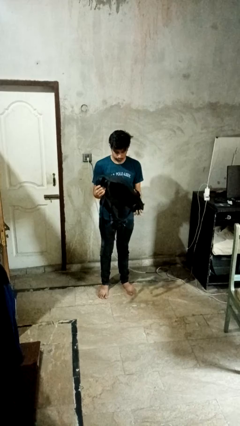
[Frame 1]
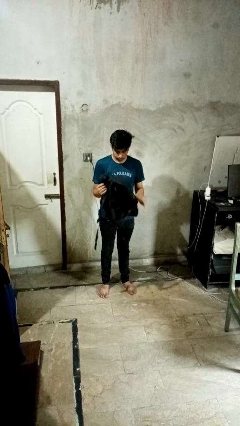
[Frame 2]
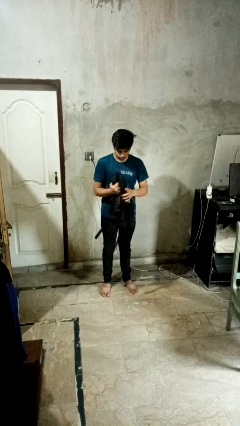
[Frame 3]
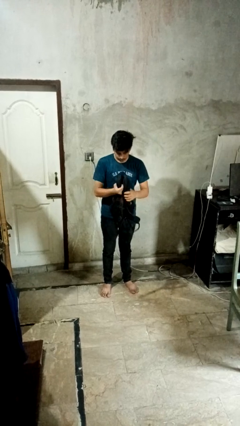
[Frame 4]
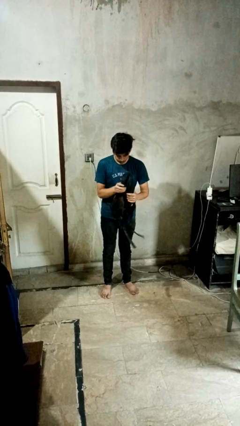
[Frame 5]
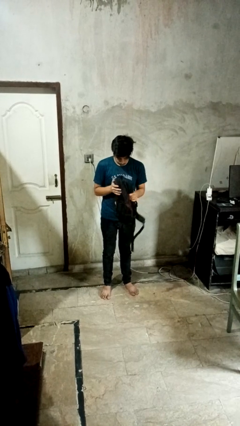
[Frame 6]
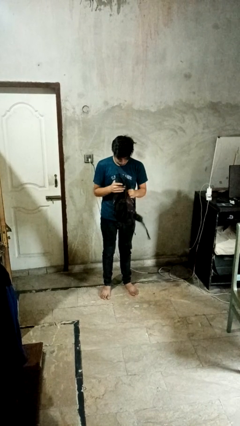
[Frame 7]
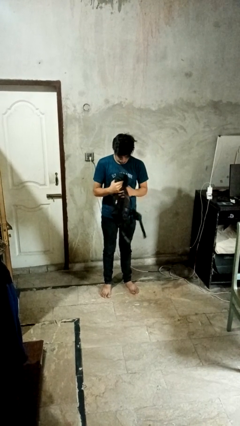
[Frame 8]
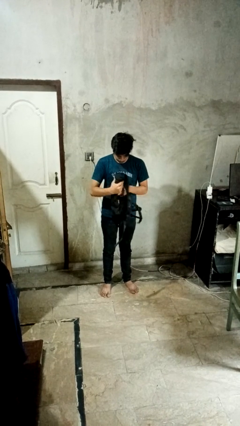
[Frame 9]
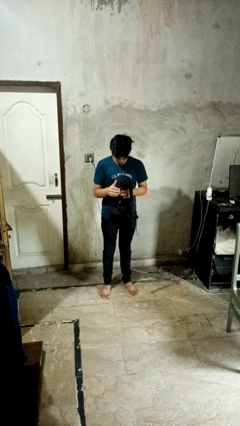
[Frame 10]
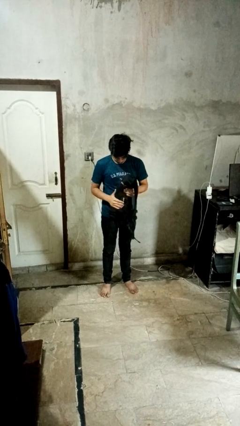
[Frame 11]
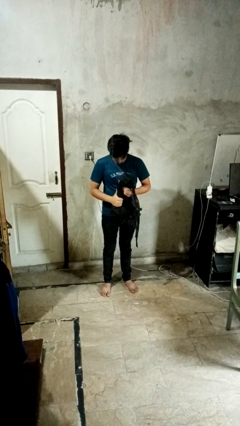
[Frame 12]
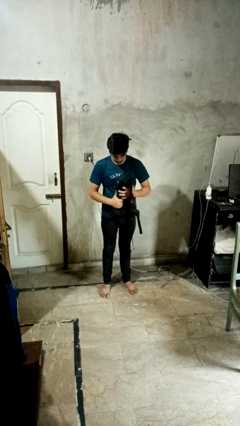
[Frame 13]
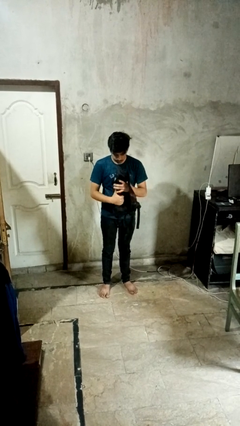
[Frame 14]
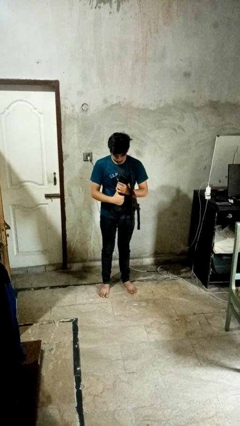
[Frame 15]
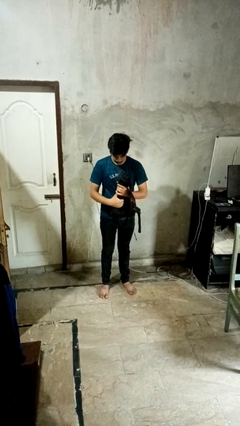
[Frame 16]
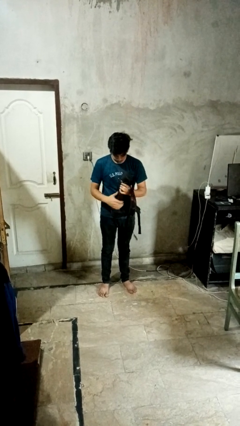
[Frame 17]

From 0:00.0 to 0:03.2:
person squeezes object

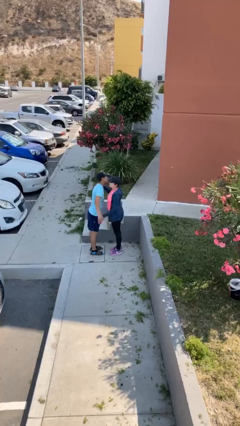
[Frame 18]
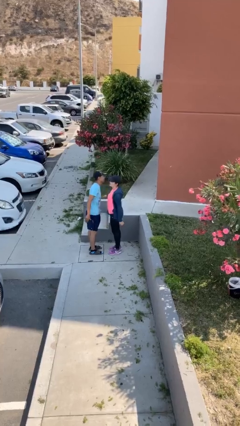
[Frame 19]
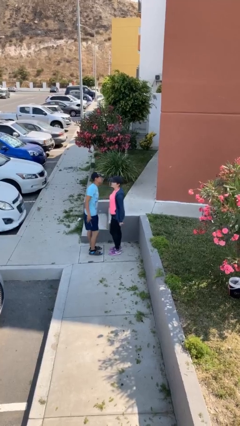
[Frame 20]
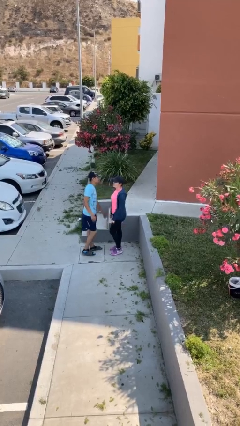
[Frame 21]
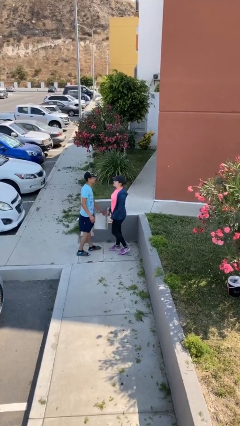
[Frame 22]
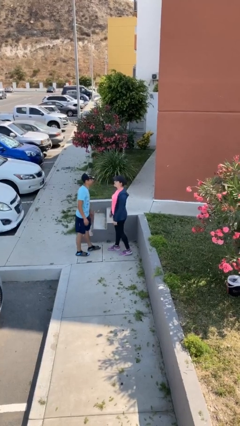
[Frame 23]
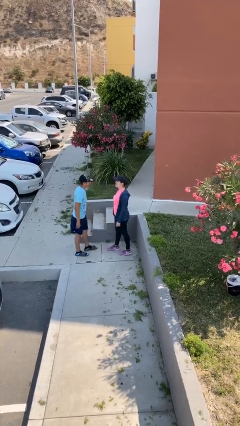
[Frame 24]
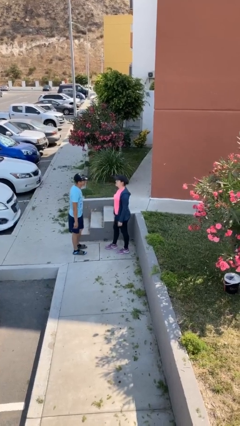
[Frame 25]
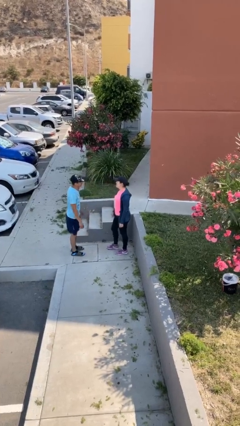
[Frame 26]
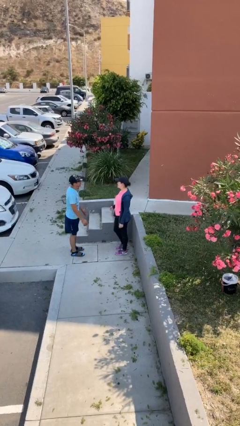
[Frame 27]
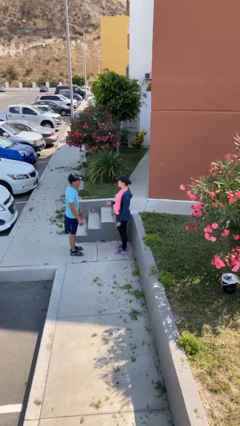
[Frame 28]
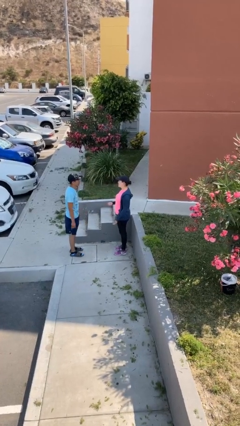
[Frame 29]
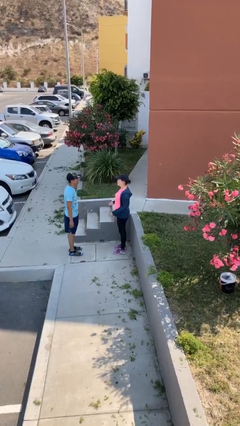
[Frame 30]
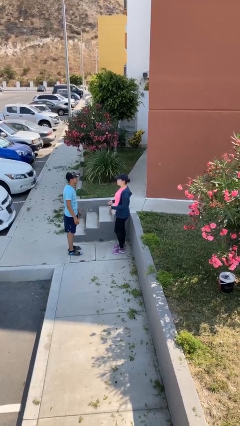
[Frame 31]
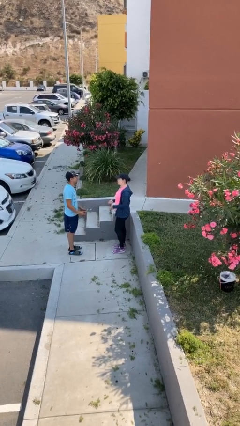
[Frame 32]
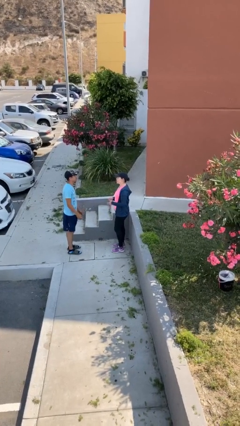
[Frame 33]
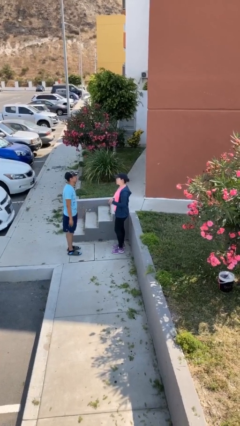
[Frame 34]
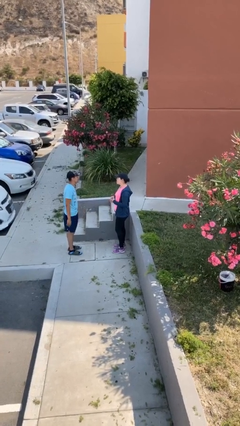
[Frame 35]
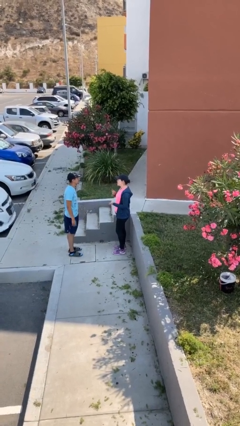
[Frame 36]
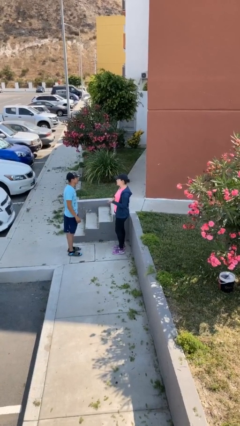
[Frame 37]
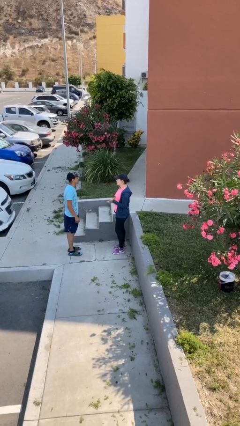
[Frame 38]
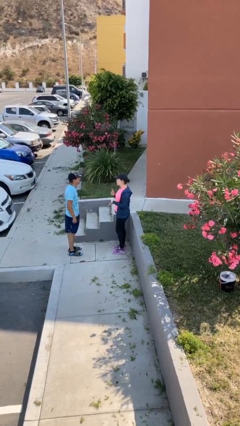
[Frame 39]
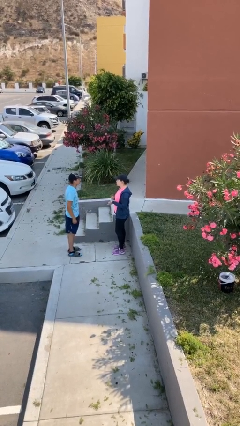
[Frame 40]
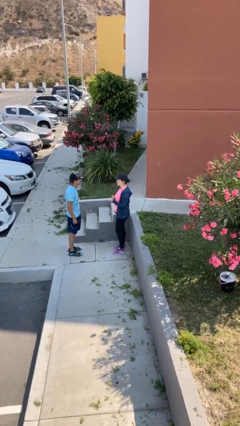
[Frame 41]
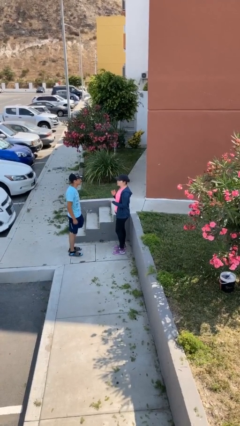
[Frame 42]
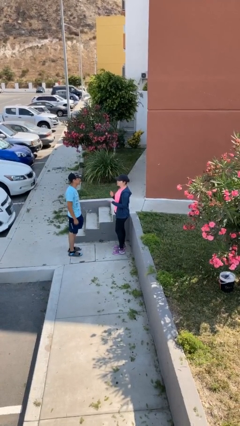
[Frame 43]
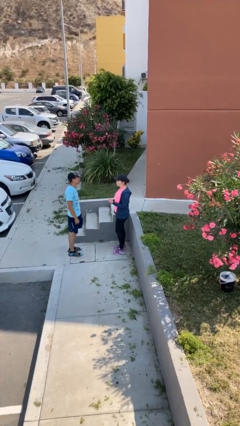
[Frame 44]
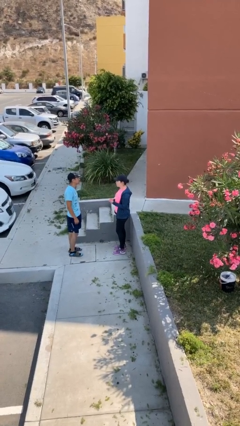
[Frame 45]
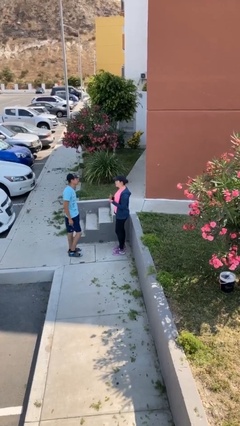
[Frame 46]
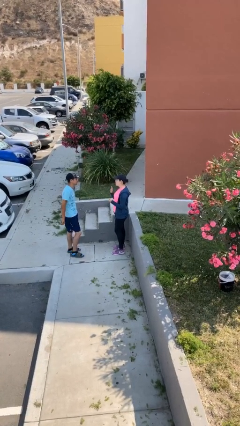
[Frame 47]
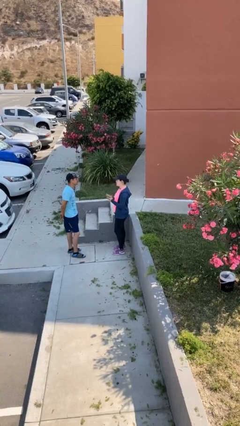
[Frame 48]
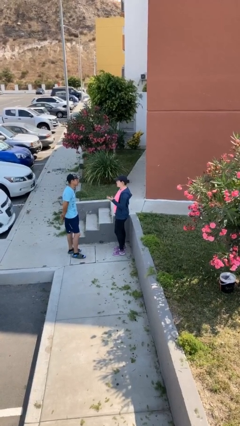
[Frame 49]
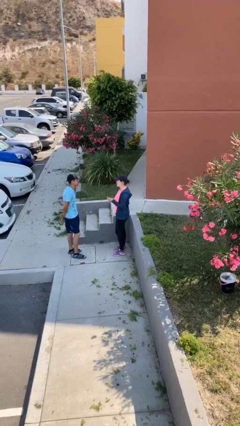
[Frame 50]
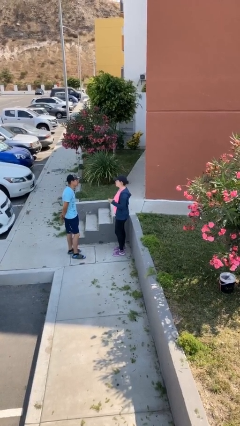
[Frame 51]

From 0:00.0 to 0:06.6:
person talks to person

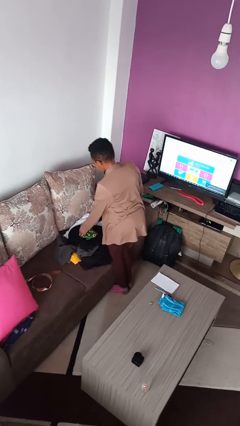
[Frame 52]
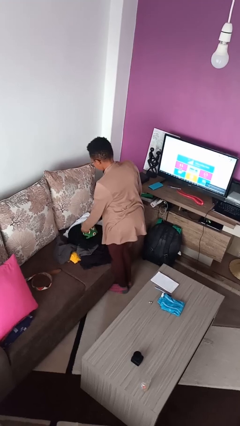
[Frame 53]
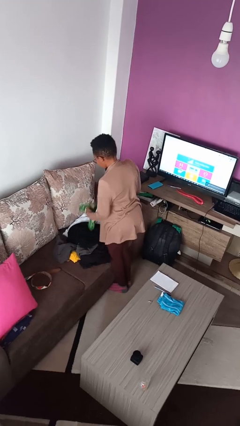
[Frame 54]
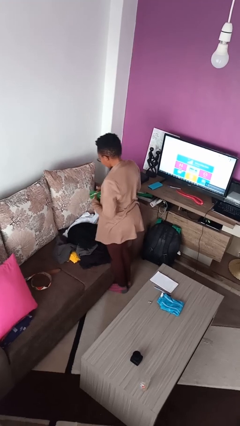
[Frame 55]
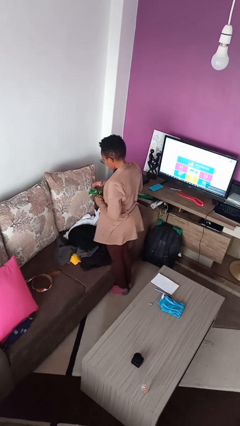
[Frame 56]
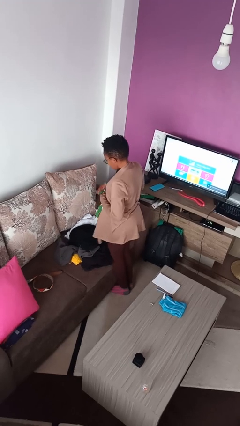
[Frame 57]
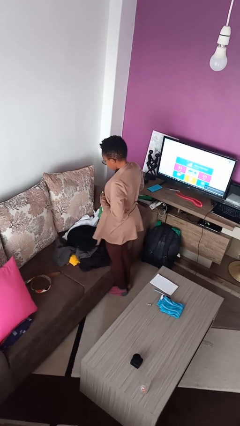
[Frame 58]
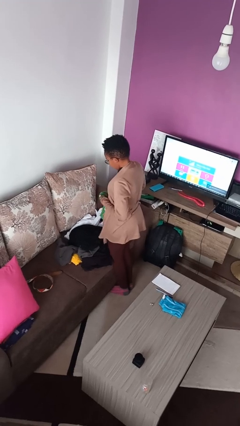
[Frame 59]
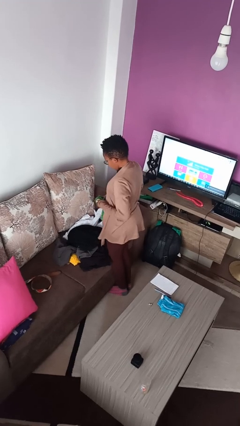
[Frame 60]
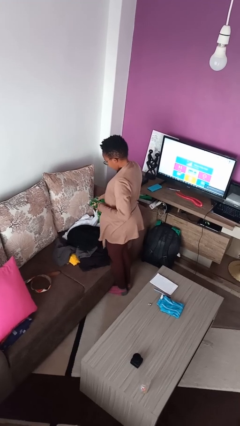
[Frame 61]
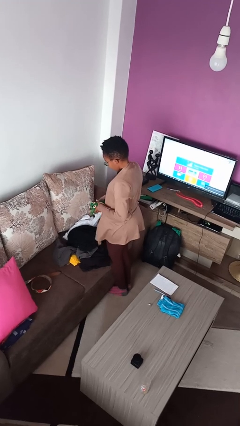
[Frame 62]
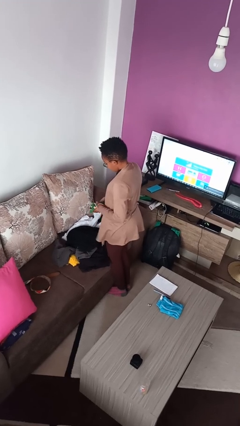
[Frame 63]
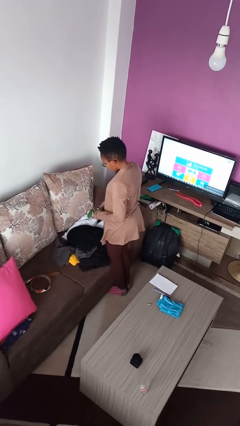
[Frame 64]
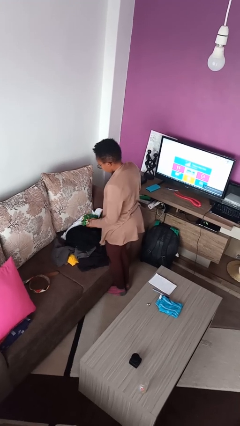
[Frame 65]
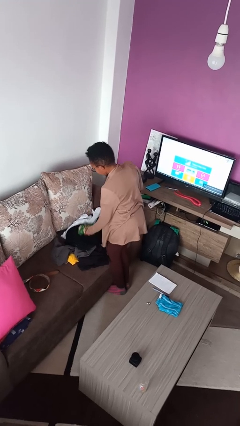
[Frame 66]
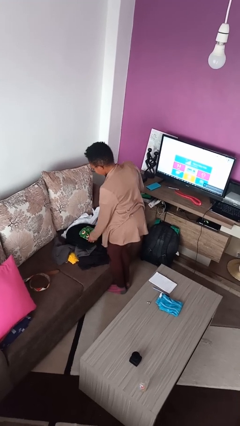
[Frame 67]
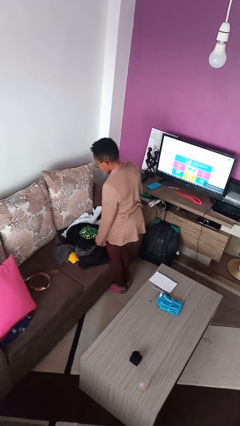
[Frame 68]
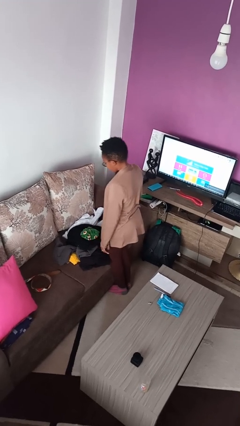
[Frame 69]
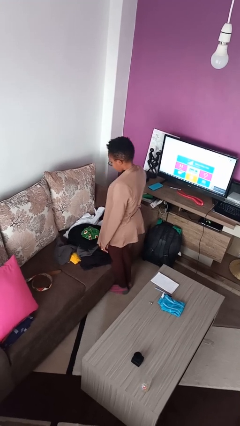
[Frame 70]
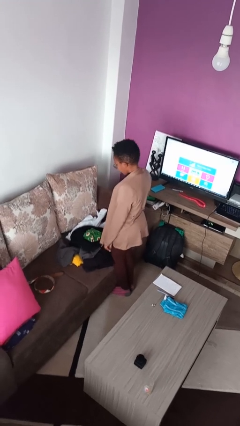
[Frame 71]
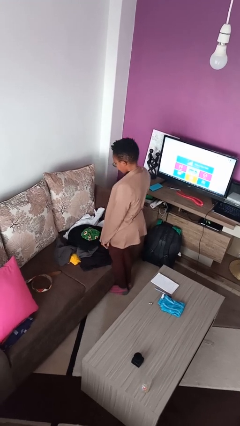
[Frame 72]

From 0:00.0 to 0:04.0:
person folds socks

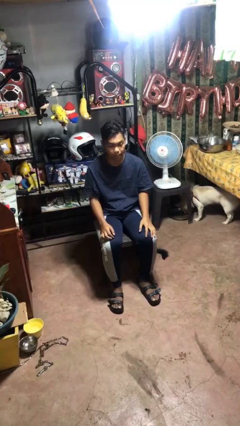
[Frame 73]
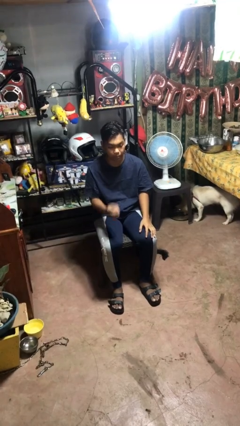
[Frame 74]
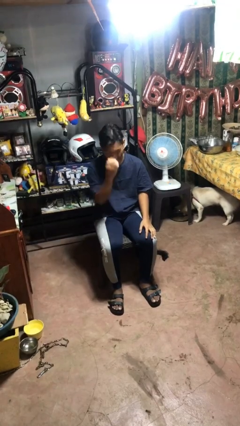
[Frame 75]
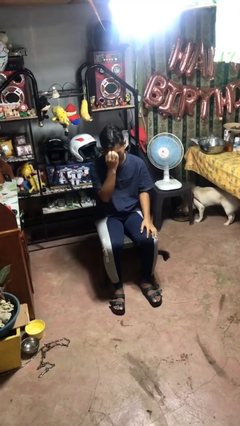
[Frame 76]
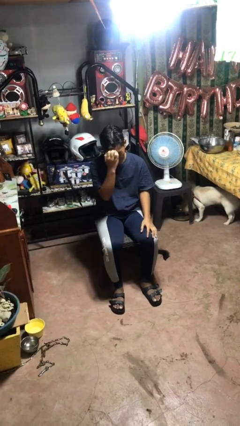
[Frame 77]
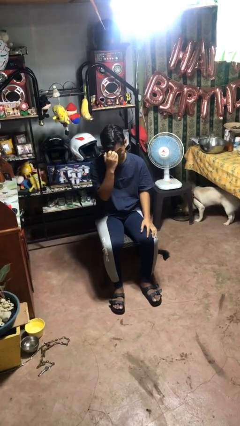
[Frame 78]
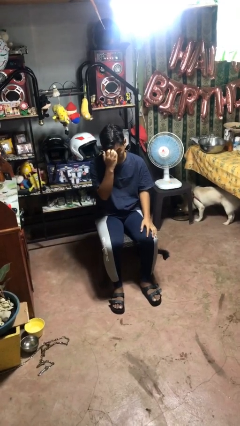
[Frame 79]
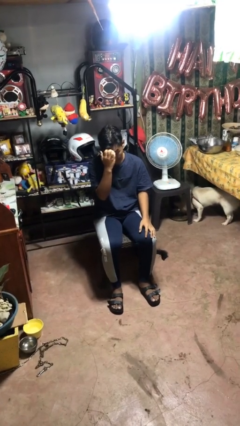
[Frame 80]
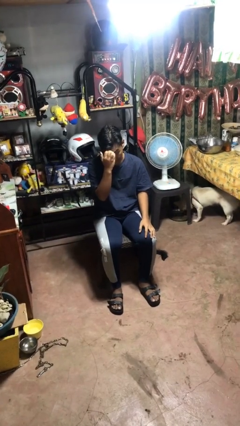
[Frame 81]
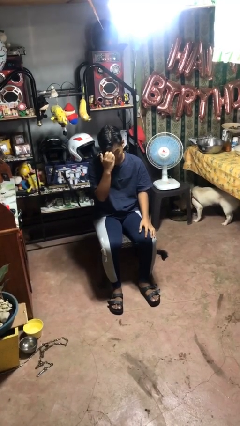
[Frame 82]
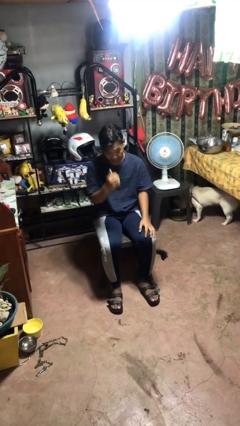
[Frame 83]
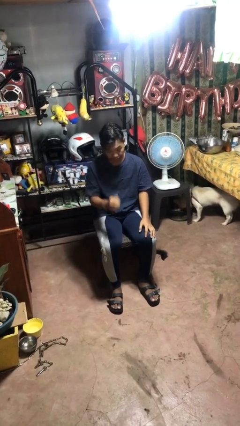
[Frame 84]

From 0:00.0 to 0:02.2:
person scratches face

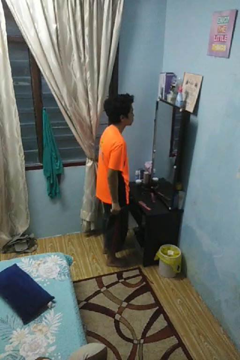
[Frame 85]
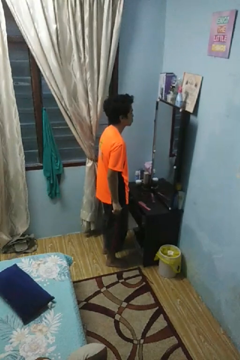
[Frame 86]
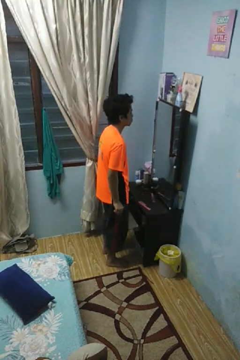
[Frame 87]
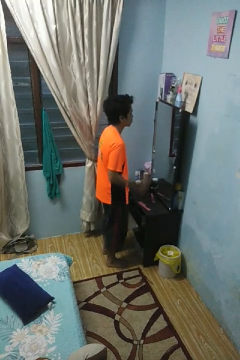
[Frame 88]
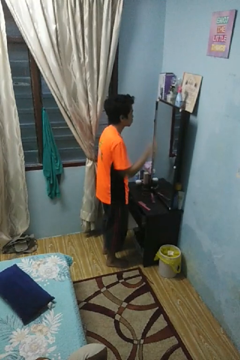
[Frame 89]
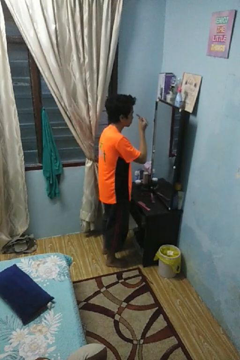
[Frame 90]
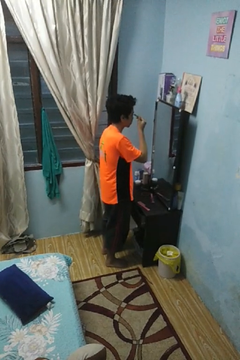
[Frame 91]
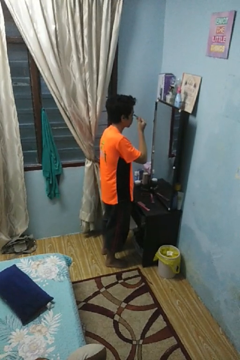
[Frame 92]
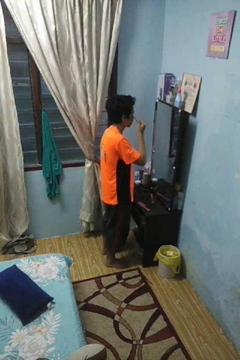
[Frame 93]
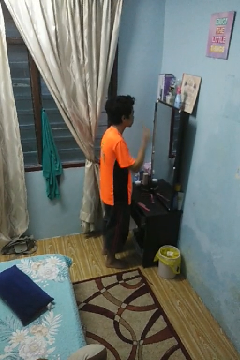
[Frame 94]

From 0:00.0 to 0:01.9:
person applies eye makeup
